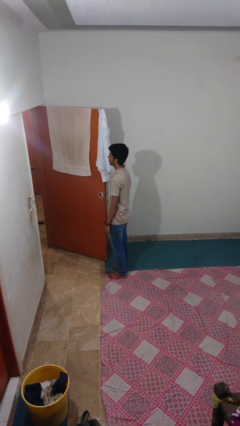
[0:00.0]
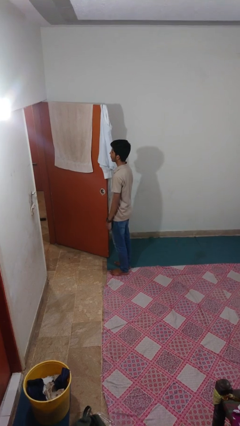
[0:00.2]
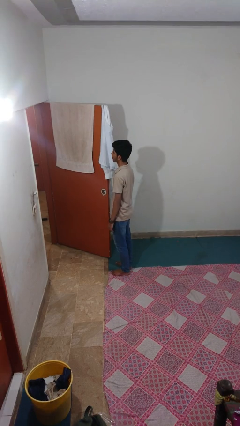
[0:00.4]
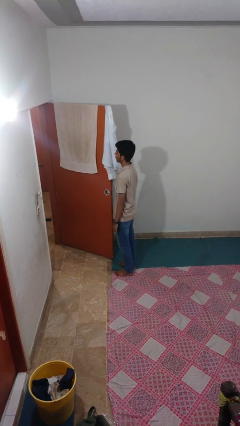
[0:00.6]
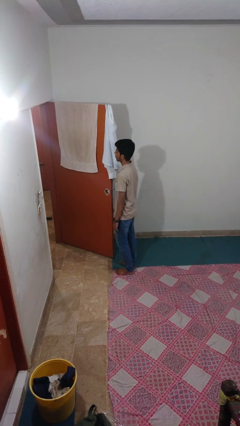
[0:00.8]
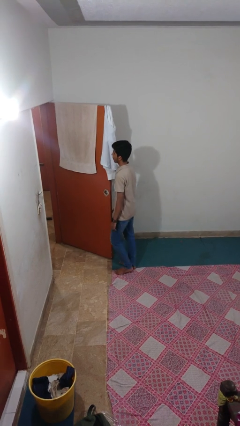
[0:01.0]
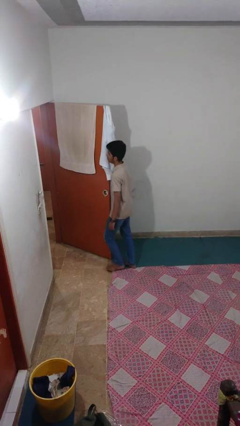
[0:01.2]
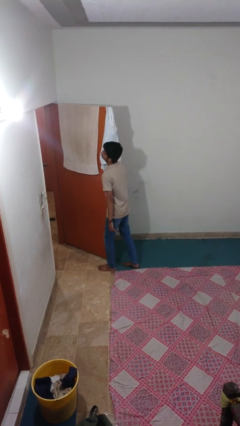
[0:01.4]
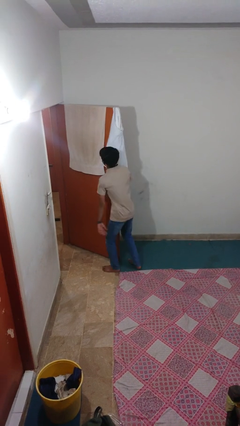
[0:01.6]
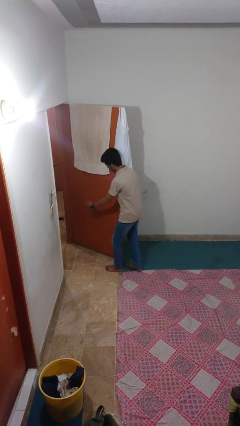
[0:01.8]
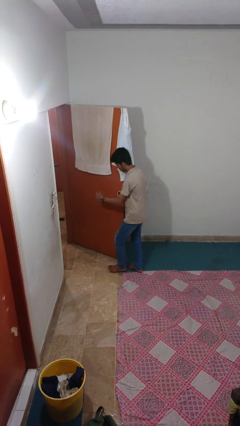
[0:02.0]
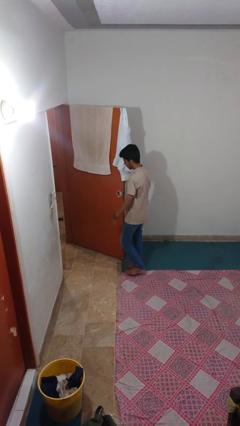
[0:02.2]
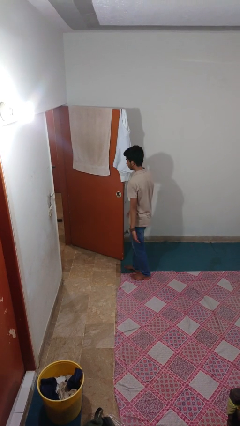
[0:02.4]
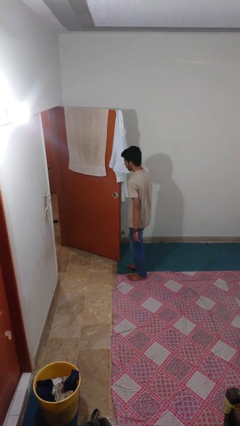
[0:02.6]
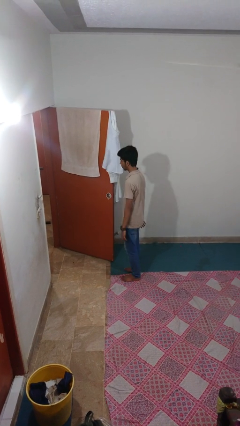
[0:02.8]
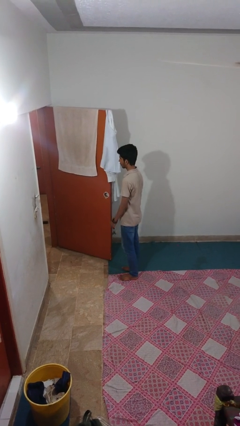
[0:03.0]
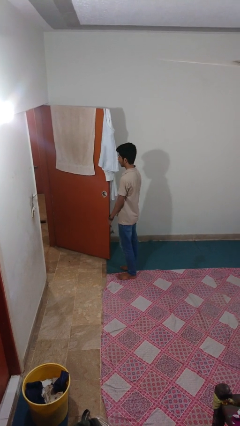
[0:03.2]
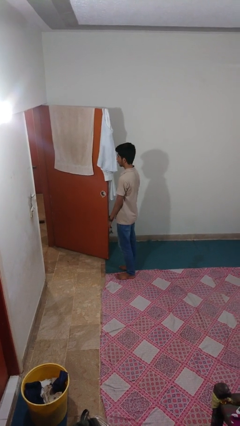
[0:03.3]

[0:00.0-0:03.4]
person bumps into wall

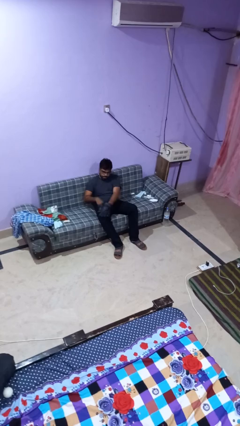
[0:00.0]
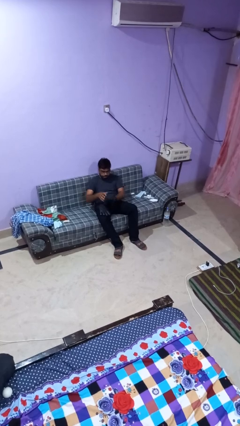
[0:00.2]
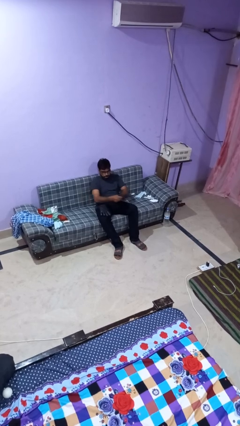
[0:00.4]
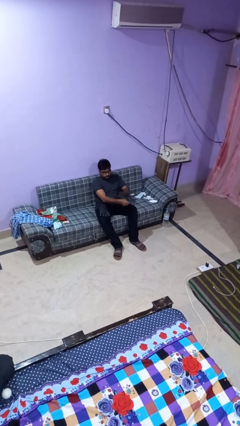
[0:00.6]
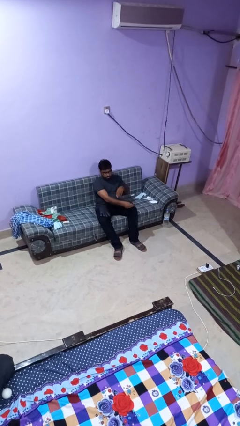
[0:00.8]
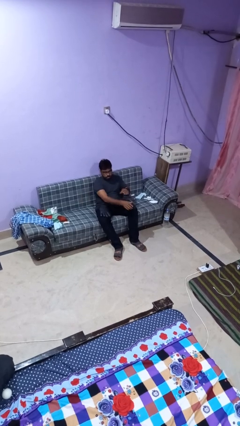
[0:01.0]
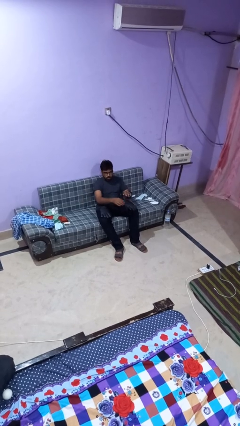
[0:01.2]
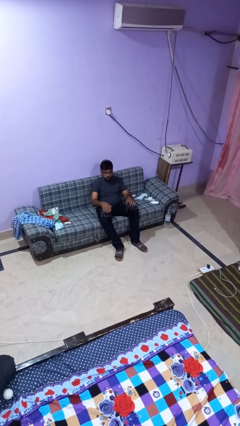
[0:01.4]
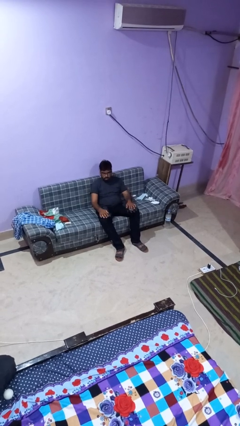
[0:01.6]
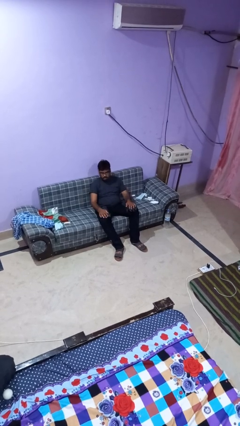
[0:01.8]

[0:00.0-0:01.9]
person takes off gloves

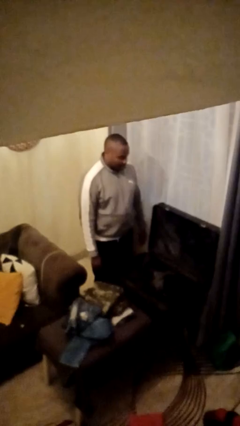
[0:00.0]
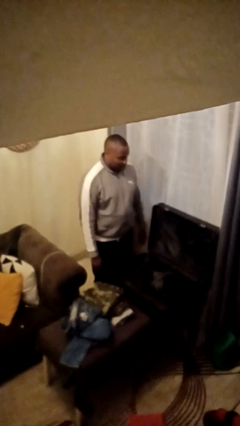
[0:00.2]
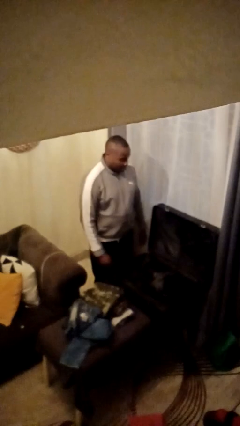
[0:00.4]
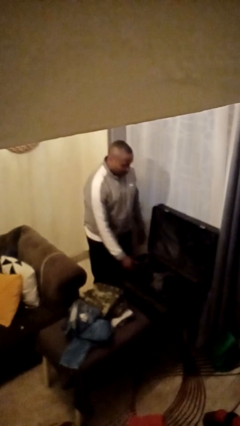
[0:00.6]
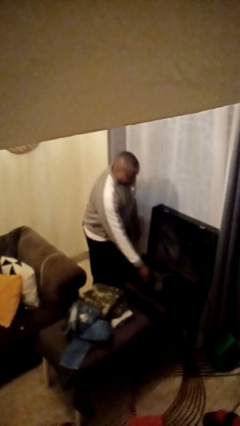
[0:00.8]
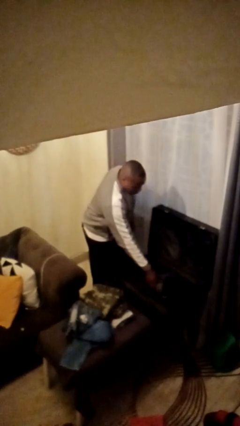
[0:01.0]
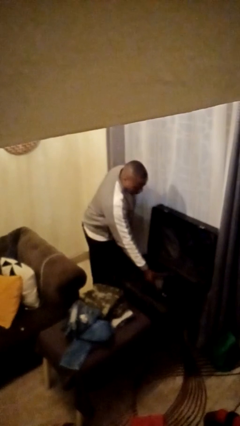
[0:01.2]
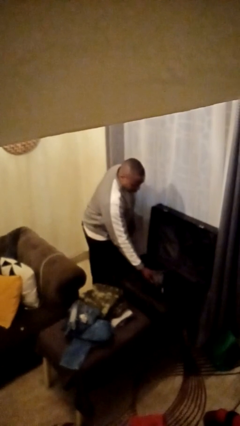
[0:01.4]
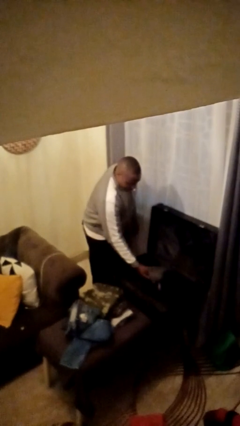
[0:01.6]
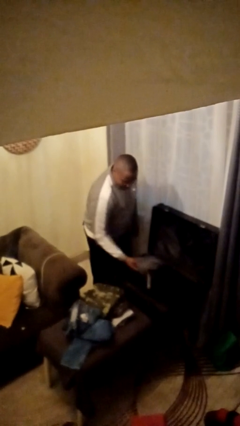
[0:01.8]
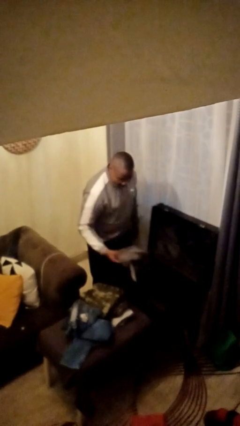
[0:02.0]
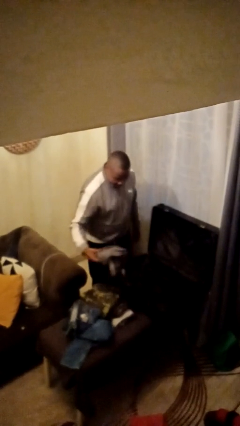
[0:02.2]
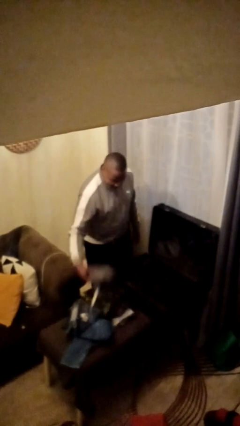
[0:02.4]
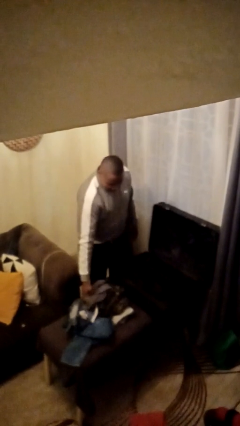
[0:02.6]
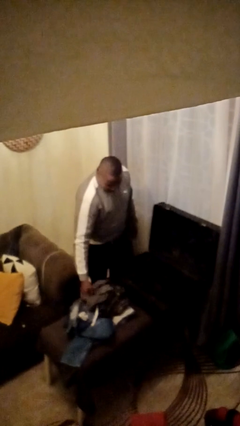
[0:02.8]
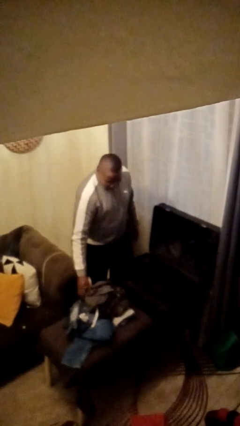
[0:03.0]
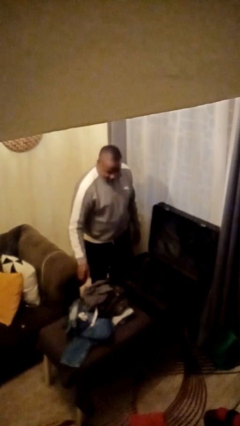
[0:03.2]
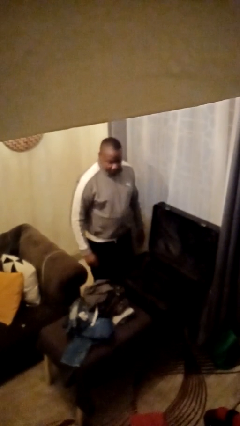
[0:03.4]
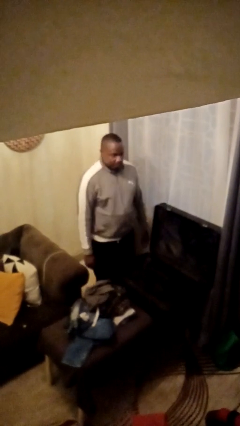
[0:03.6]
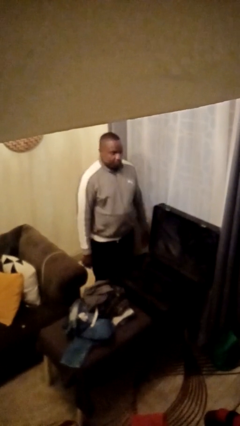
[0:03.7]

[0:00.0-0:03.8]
person unloads clothes from suitcase

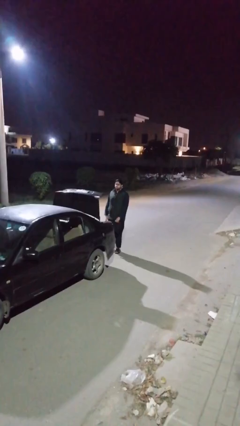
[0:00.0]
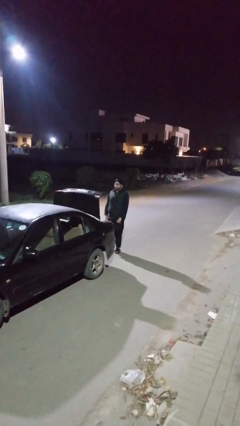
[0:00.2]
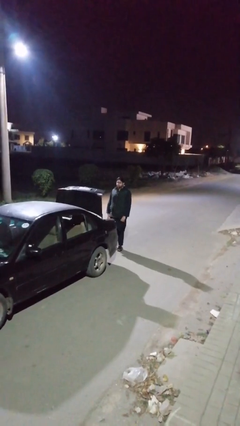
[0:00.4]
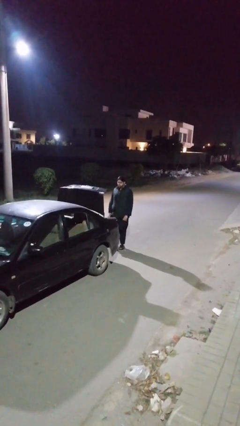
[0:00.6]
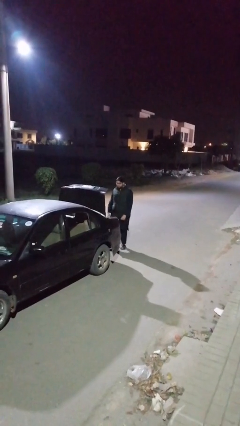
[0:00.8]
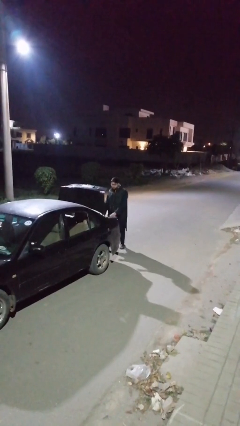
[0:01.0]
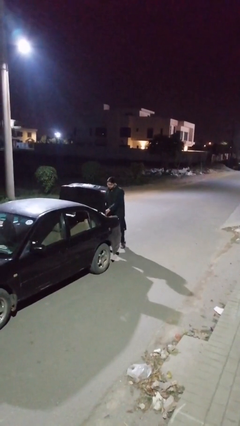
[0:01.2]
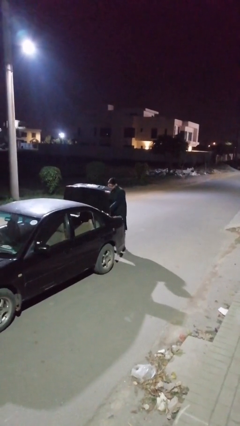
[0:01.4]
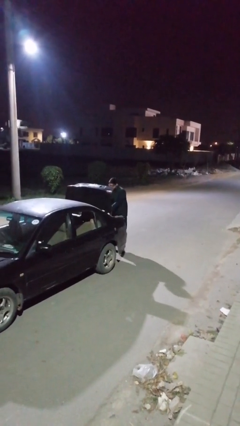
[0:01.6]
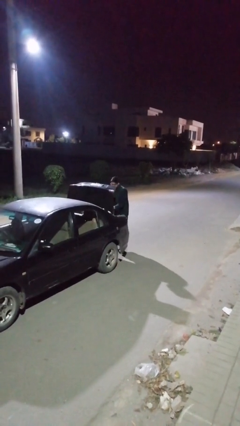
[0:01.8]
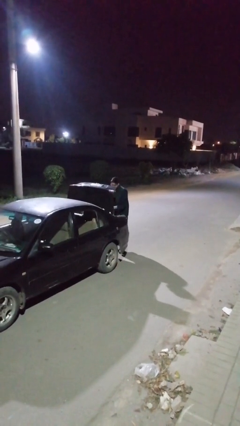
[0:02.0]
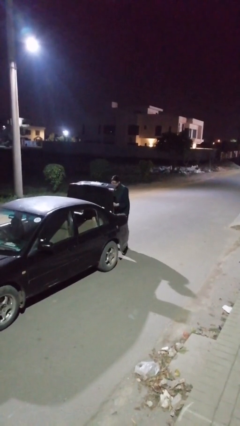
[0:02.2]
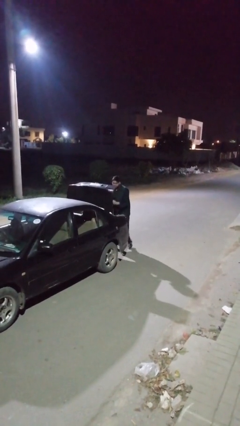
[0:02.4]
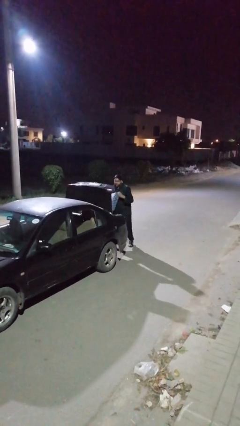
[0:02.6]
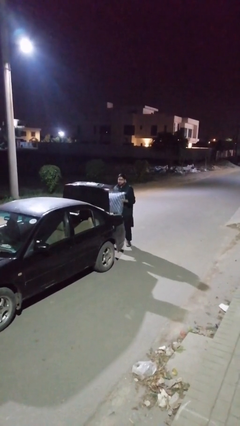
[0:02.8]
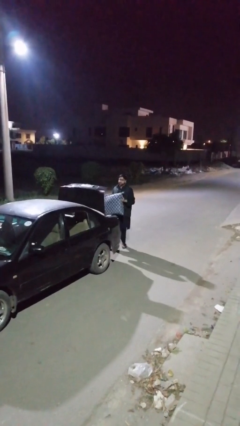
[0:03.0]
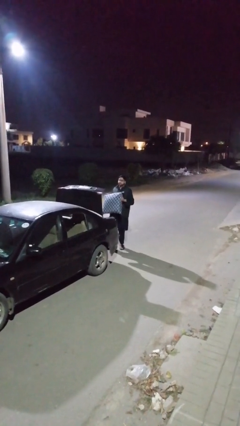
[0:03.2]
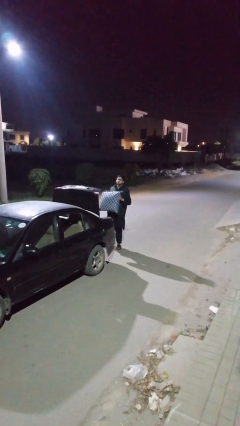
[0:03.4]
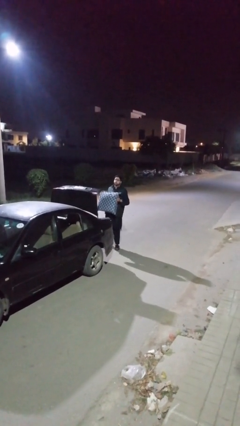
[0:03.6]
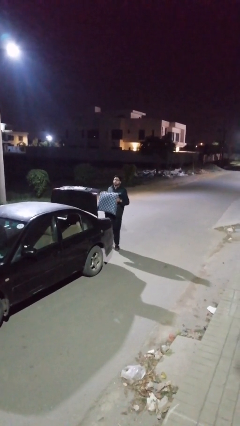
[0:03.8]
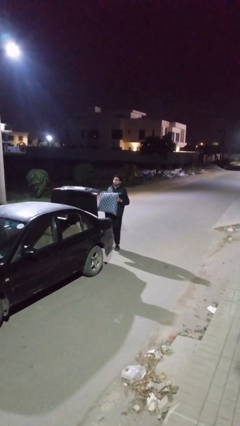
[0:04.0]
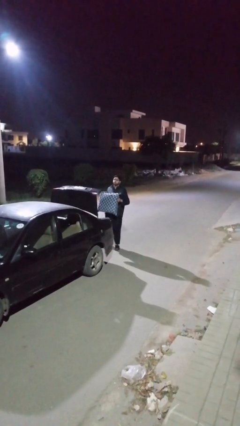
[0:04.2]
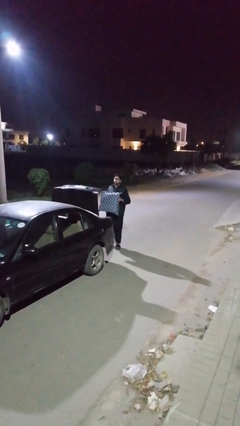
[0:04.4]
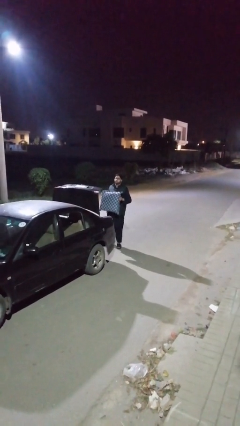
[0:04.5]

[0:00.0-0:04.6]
person unloads car

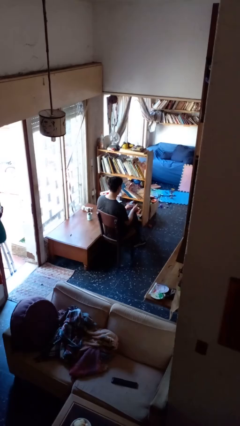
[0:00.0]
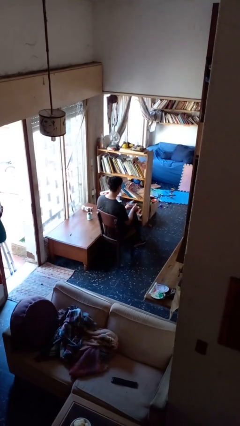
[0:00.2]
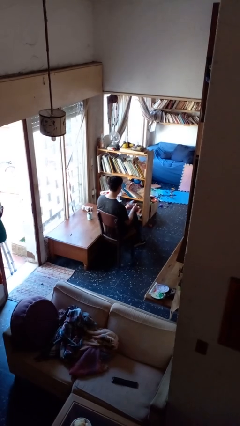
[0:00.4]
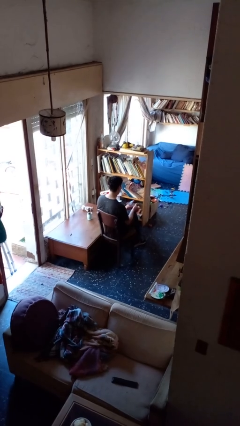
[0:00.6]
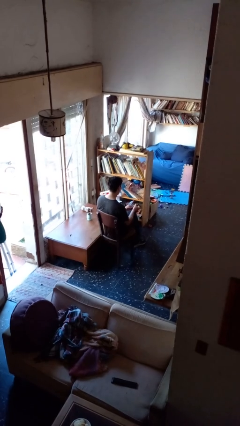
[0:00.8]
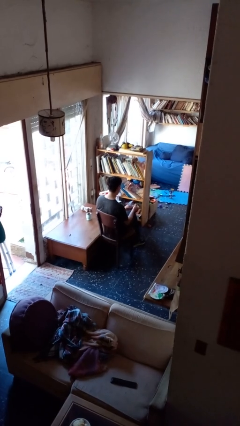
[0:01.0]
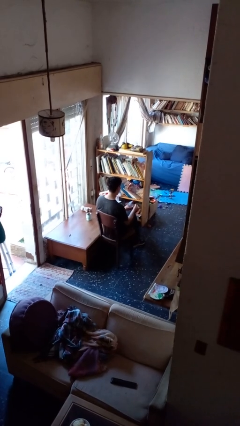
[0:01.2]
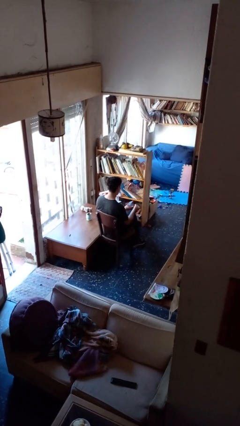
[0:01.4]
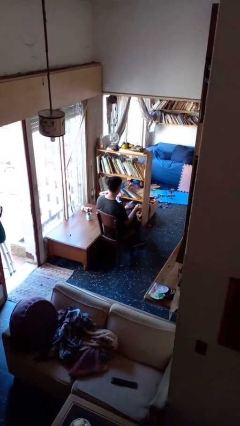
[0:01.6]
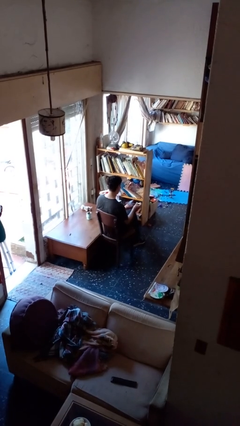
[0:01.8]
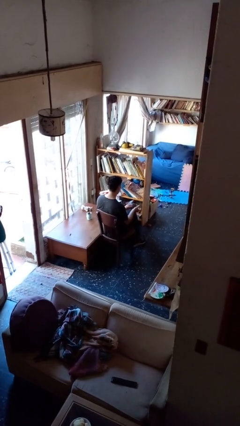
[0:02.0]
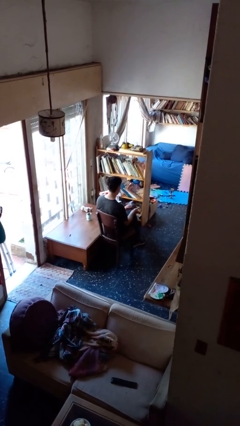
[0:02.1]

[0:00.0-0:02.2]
person clips fingernails

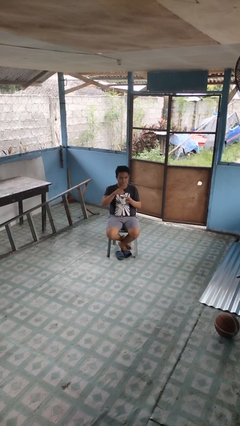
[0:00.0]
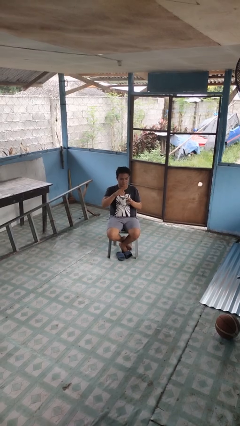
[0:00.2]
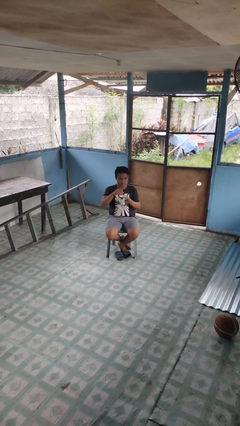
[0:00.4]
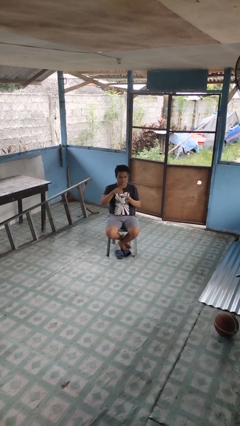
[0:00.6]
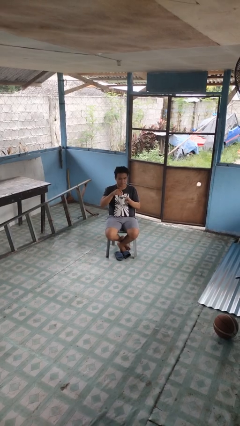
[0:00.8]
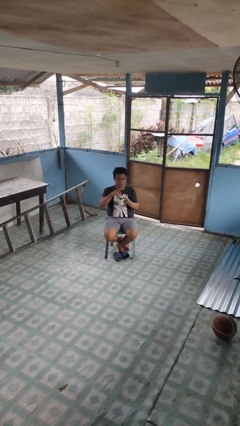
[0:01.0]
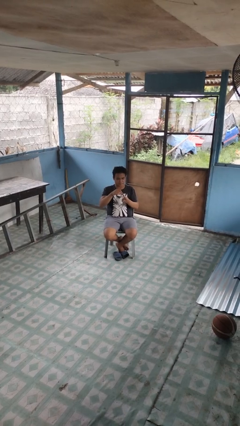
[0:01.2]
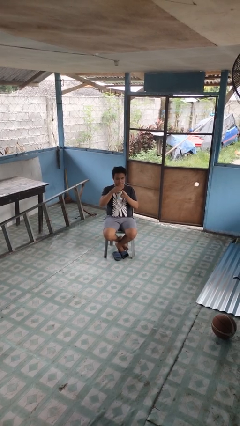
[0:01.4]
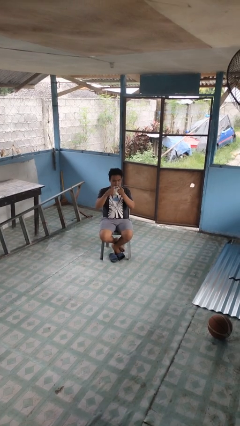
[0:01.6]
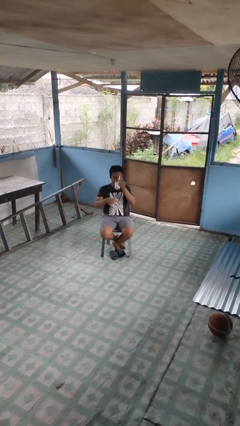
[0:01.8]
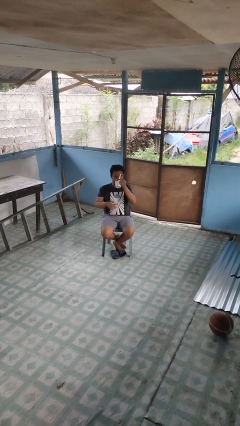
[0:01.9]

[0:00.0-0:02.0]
person stirs mug
